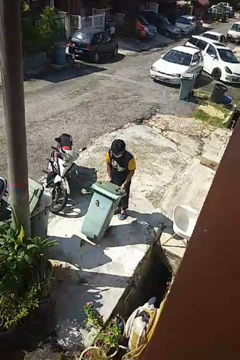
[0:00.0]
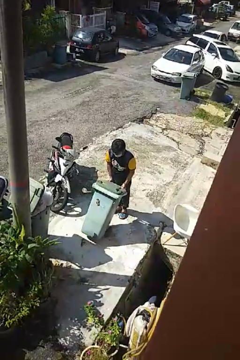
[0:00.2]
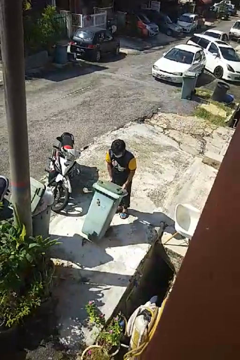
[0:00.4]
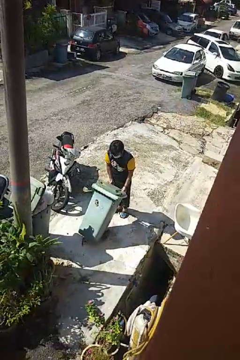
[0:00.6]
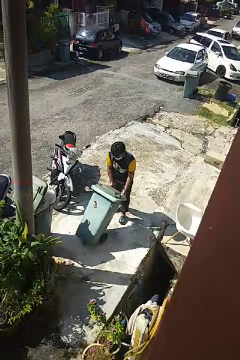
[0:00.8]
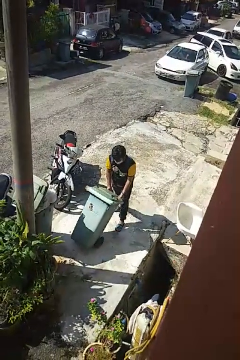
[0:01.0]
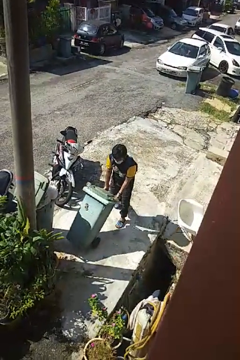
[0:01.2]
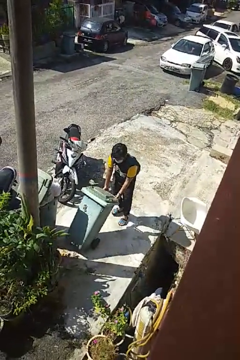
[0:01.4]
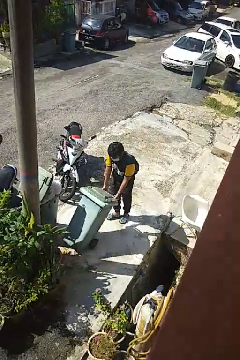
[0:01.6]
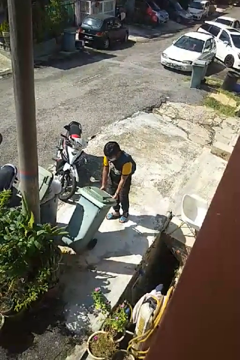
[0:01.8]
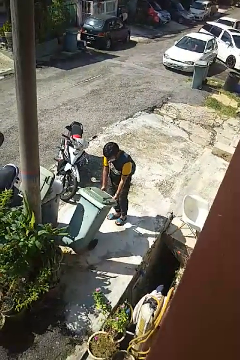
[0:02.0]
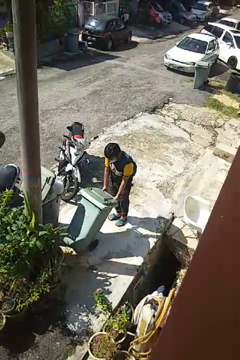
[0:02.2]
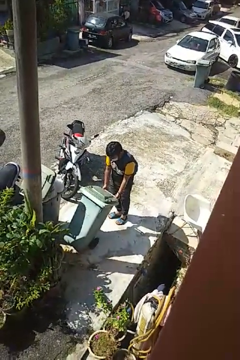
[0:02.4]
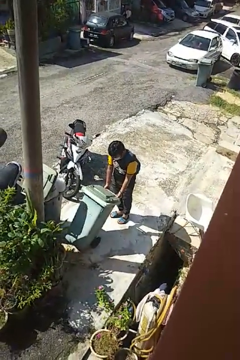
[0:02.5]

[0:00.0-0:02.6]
person pushes wheeled trashcan

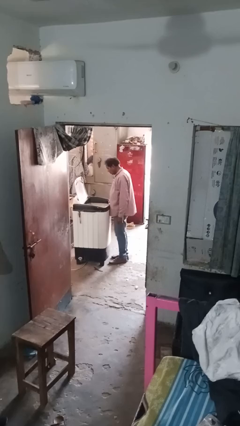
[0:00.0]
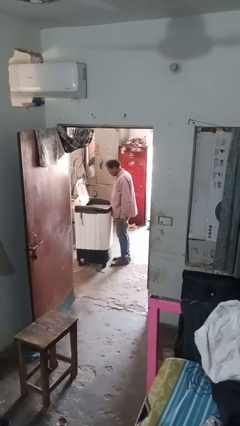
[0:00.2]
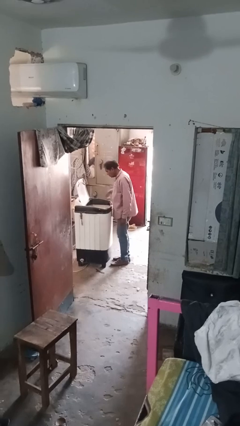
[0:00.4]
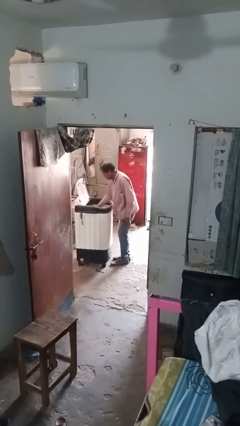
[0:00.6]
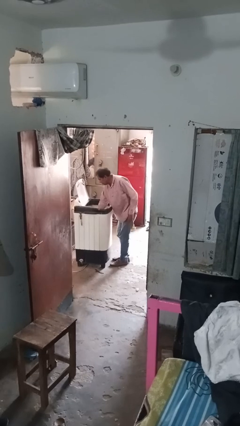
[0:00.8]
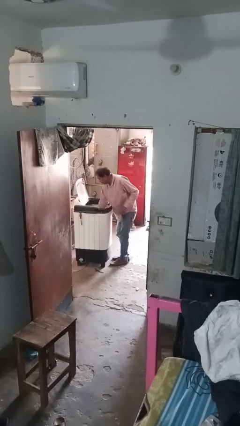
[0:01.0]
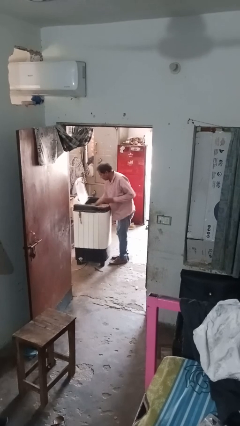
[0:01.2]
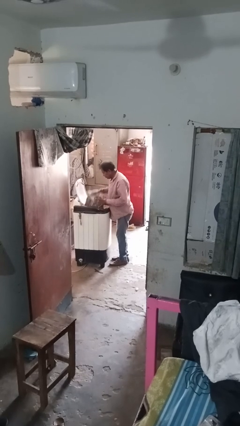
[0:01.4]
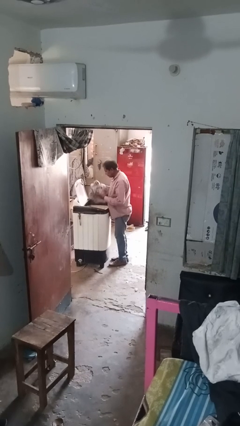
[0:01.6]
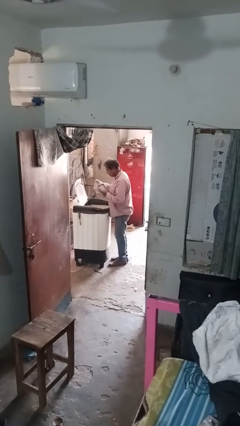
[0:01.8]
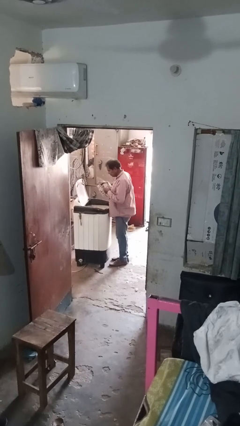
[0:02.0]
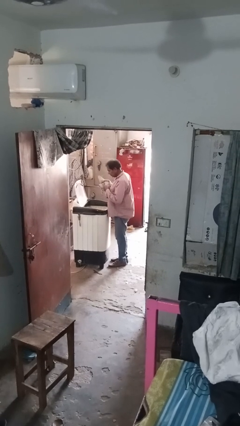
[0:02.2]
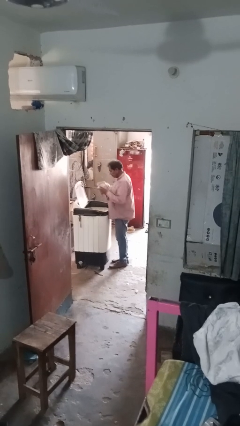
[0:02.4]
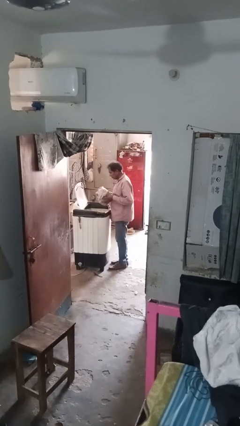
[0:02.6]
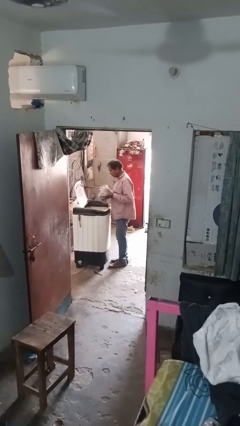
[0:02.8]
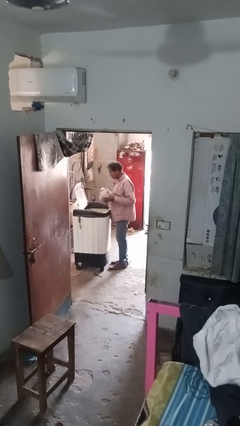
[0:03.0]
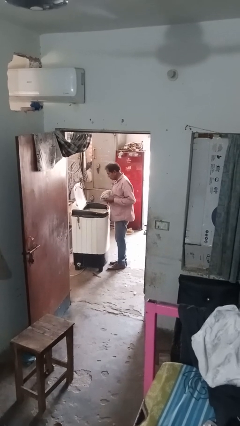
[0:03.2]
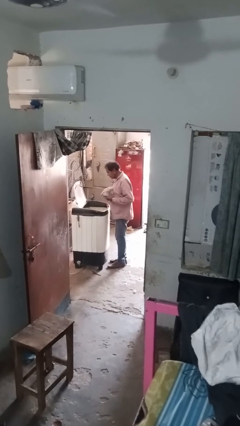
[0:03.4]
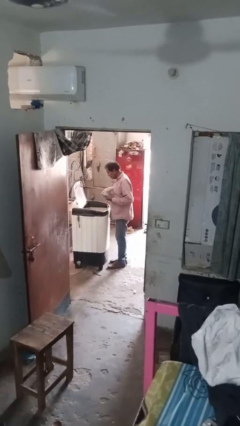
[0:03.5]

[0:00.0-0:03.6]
person unloads clotheswasher

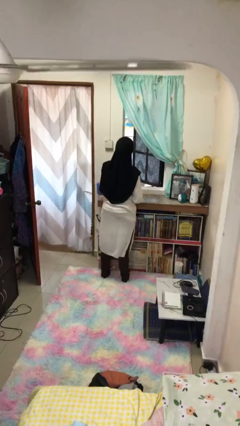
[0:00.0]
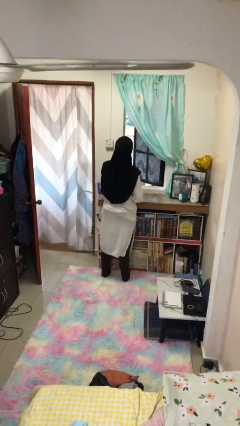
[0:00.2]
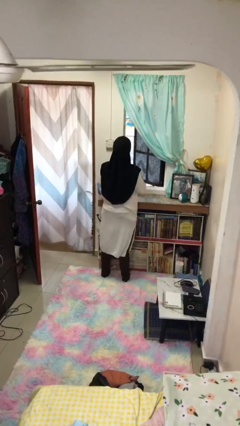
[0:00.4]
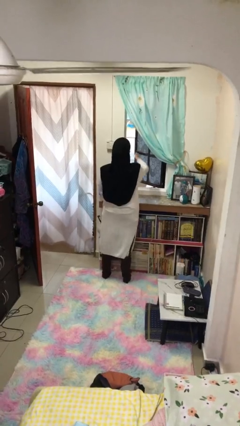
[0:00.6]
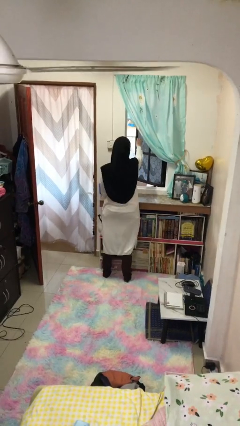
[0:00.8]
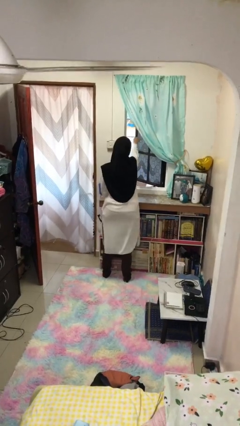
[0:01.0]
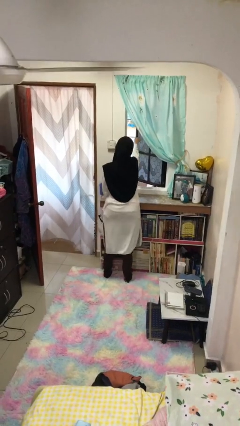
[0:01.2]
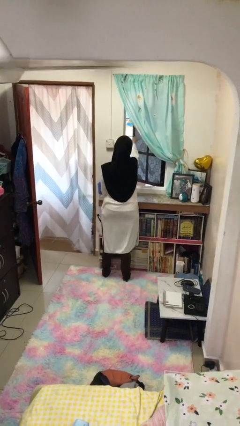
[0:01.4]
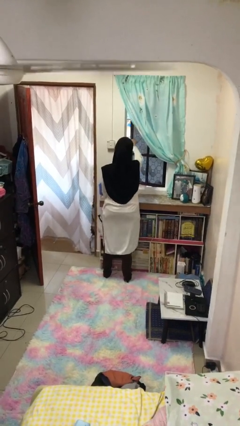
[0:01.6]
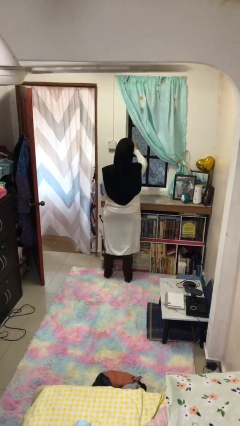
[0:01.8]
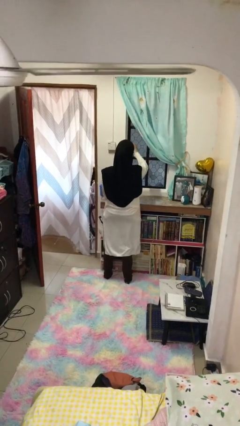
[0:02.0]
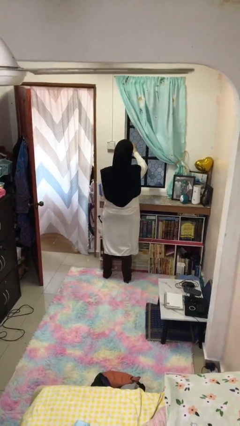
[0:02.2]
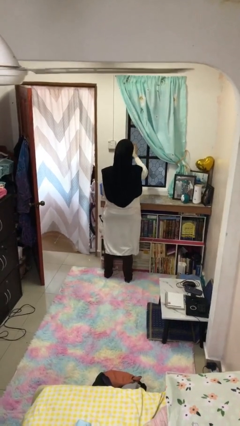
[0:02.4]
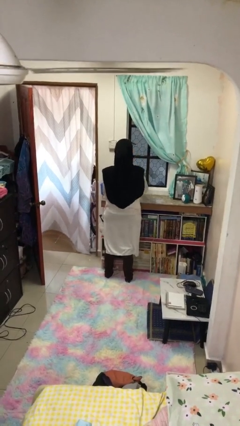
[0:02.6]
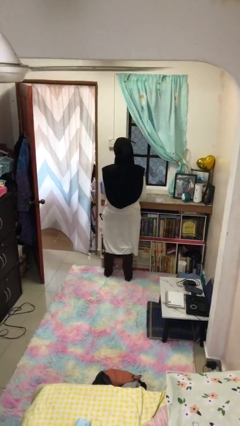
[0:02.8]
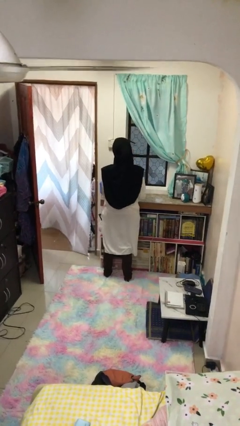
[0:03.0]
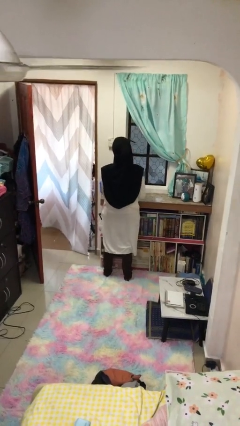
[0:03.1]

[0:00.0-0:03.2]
person closes home window

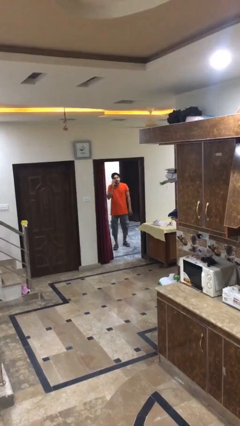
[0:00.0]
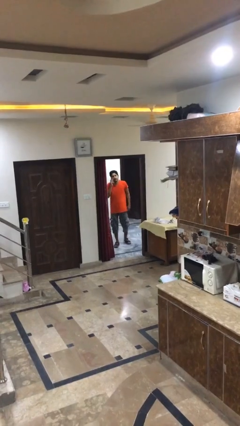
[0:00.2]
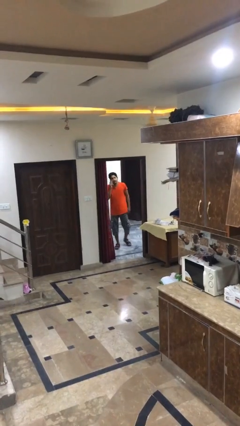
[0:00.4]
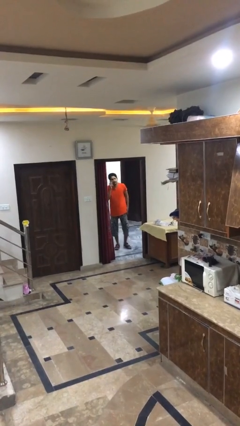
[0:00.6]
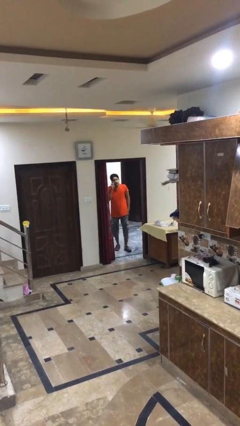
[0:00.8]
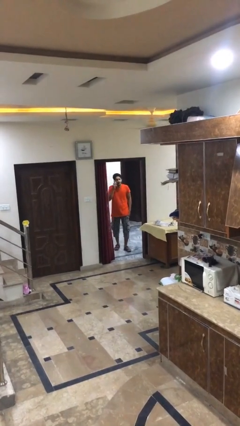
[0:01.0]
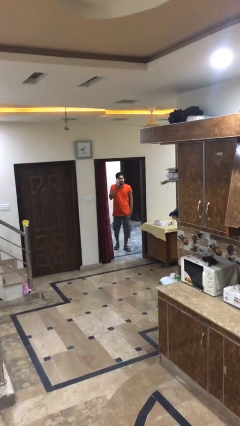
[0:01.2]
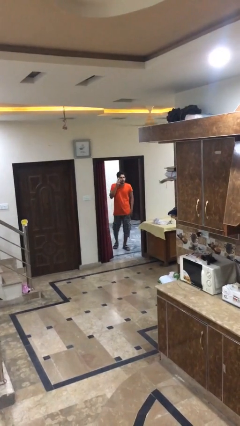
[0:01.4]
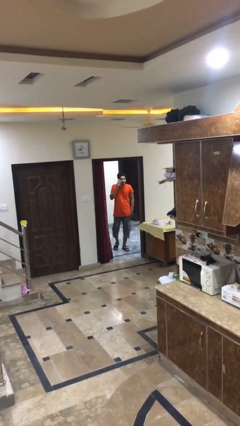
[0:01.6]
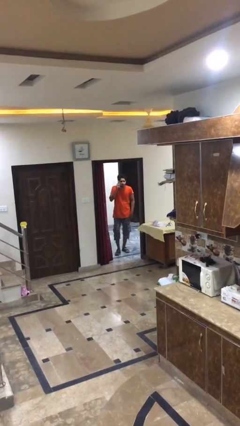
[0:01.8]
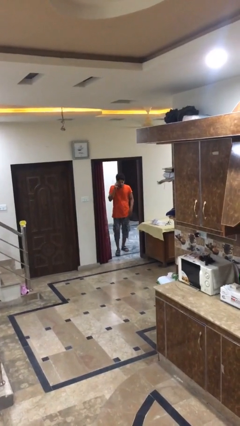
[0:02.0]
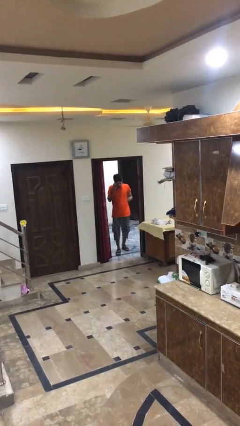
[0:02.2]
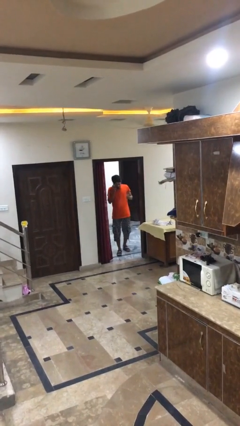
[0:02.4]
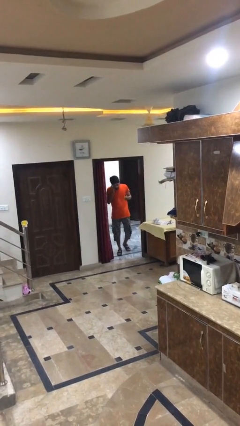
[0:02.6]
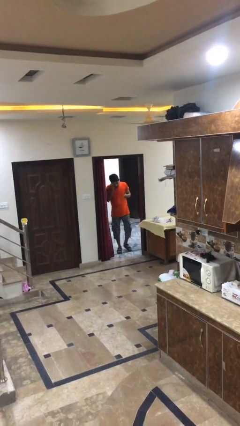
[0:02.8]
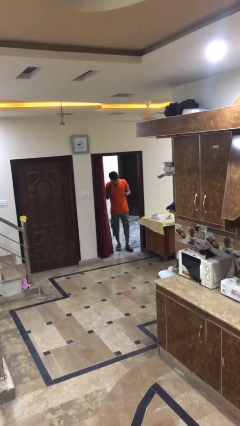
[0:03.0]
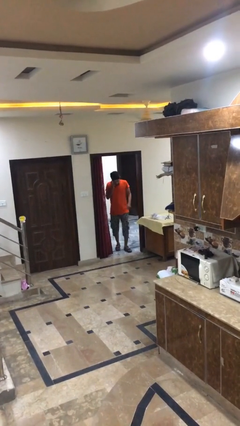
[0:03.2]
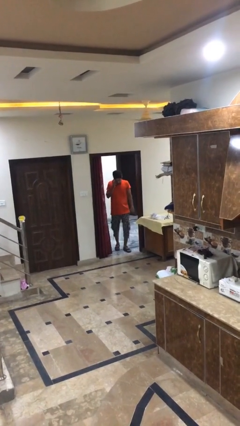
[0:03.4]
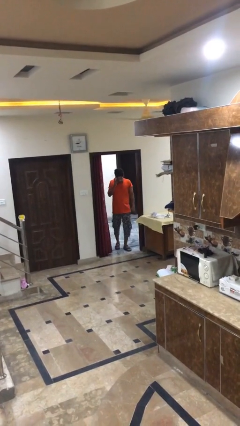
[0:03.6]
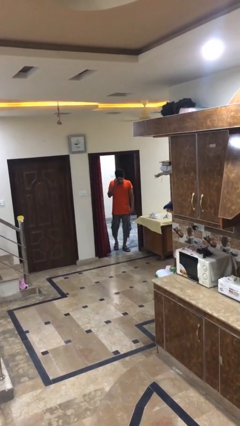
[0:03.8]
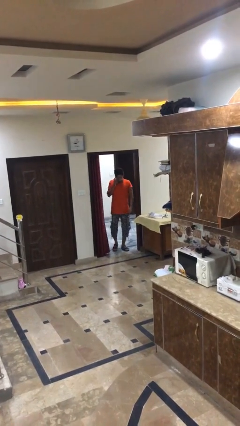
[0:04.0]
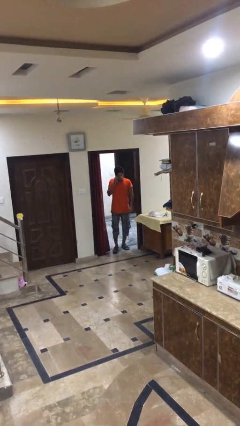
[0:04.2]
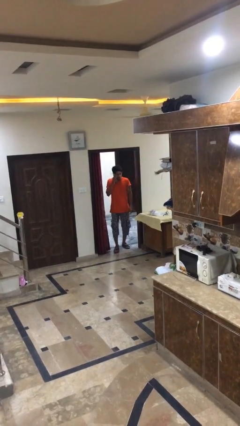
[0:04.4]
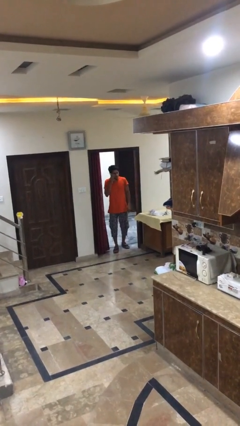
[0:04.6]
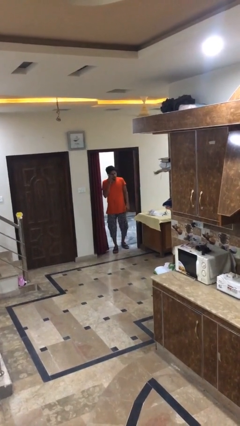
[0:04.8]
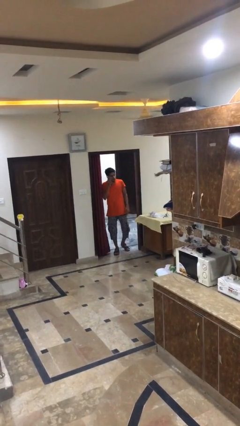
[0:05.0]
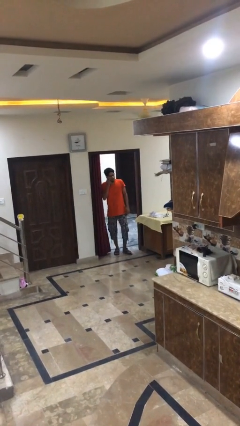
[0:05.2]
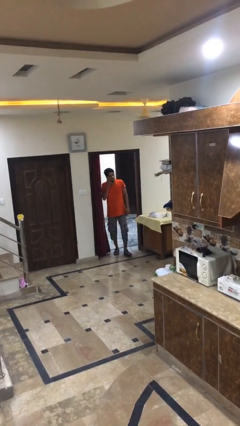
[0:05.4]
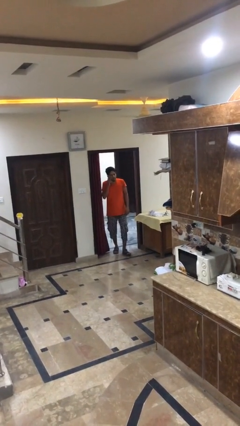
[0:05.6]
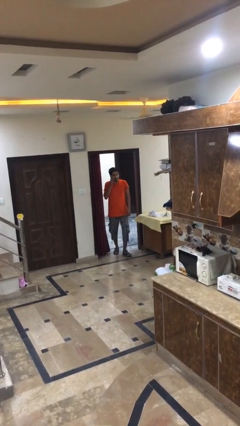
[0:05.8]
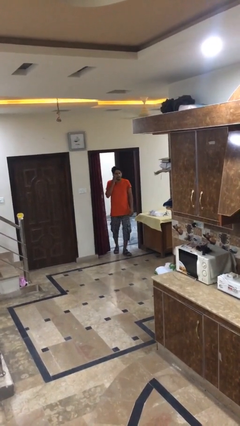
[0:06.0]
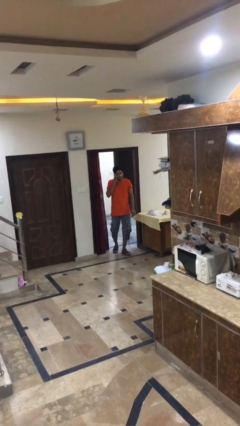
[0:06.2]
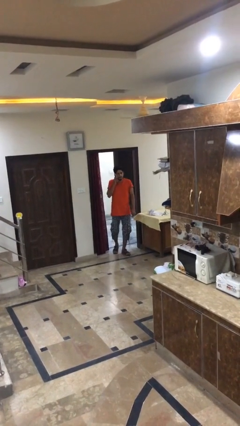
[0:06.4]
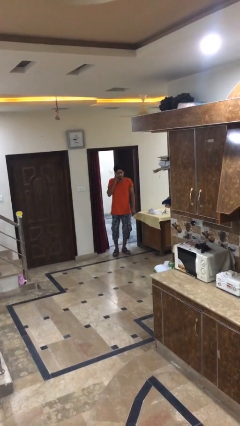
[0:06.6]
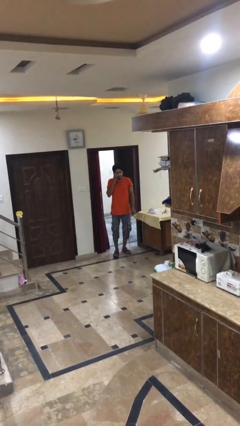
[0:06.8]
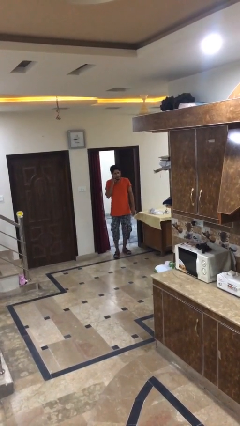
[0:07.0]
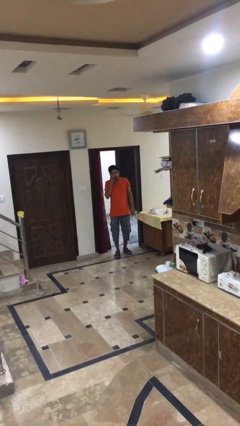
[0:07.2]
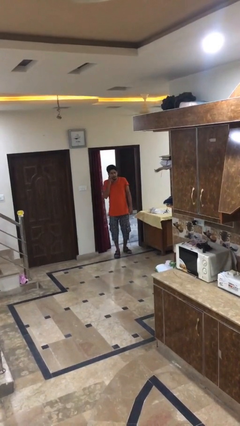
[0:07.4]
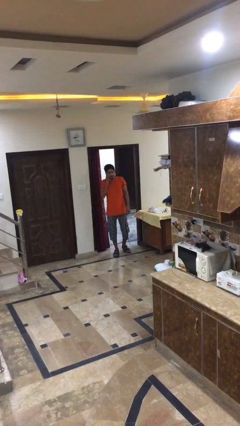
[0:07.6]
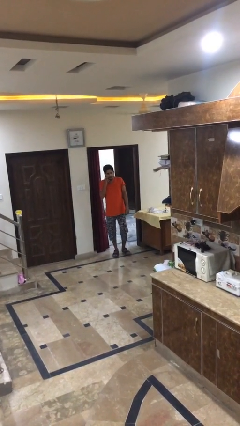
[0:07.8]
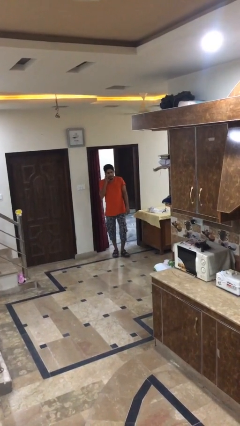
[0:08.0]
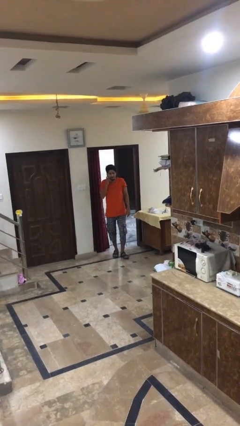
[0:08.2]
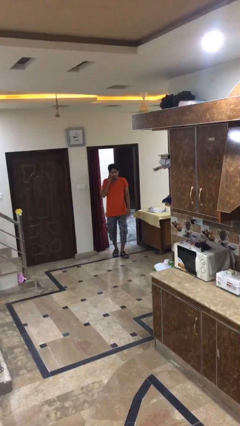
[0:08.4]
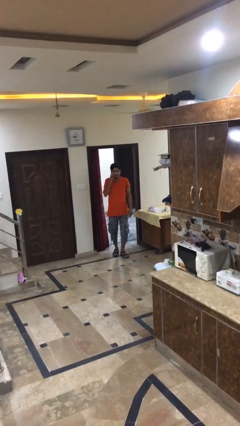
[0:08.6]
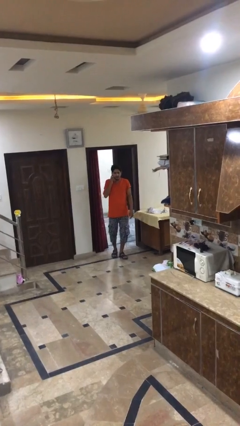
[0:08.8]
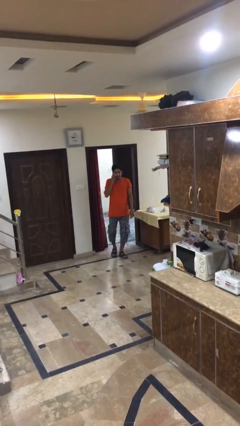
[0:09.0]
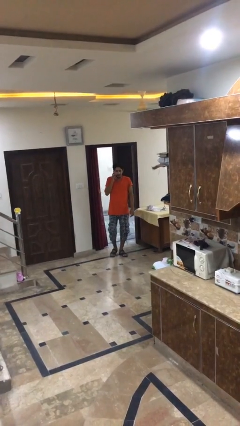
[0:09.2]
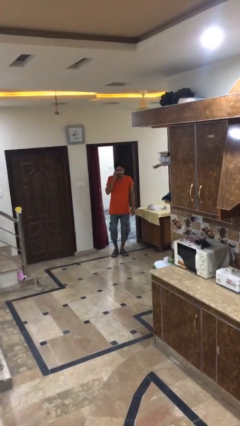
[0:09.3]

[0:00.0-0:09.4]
person enters scene through structure
